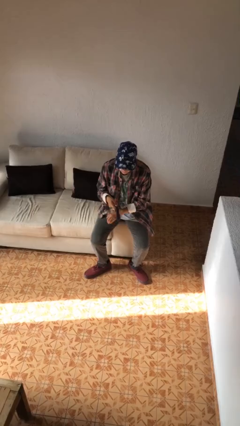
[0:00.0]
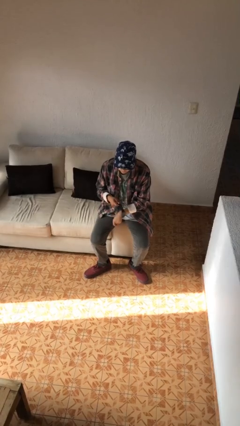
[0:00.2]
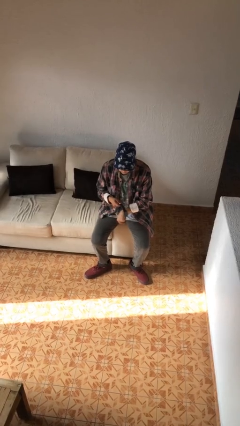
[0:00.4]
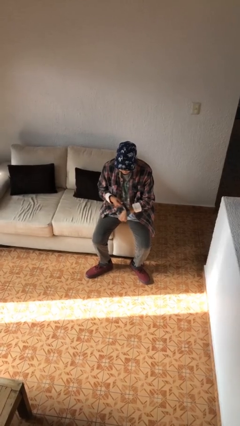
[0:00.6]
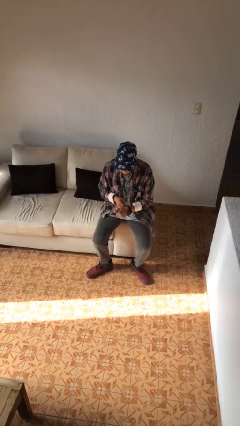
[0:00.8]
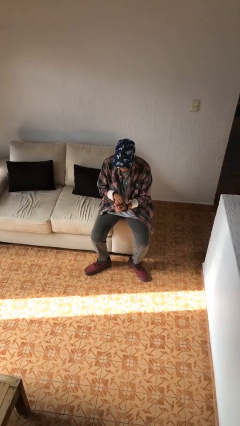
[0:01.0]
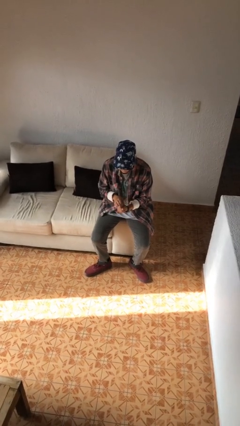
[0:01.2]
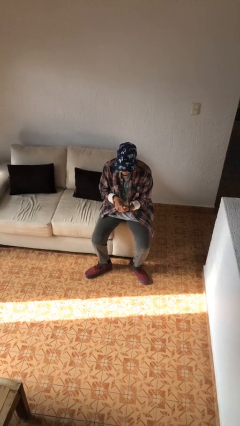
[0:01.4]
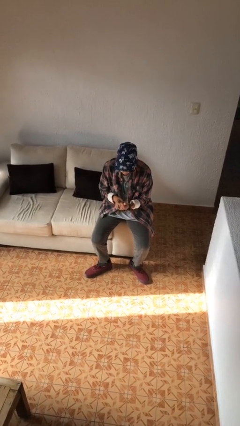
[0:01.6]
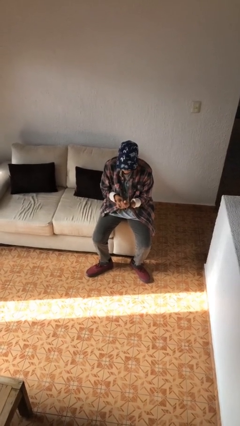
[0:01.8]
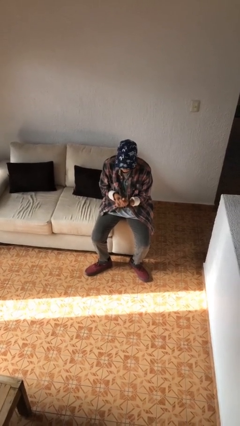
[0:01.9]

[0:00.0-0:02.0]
person puts on wristwatch

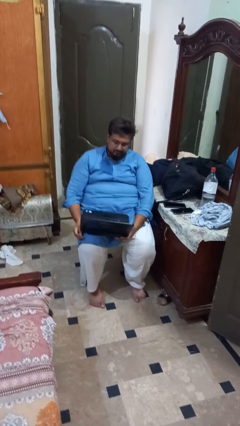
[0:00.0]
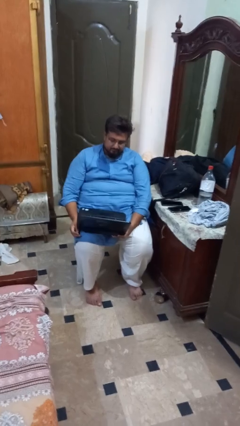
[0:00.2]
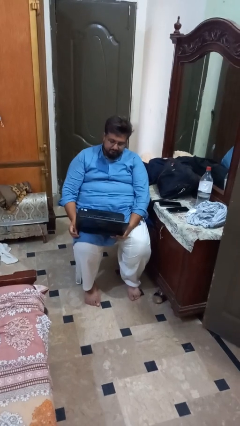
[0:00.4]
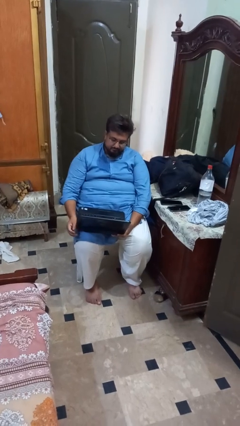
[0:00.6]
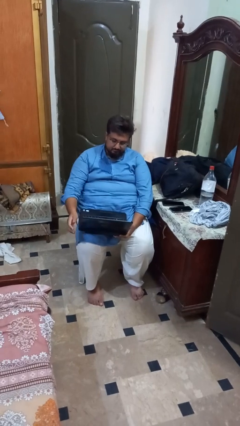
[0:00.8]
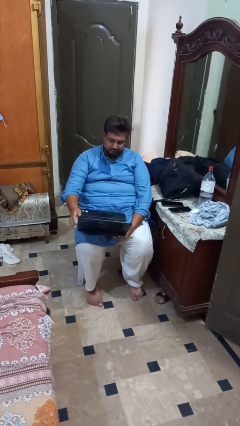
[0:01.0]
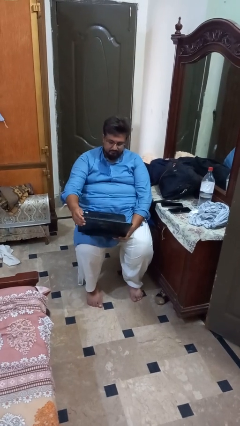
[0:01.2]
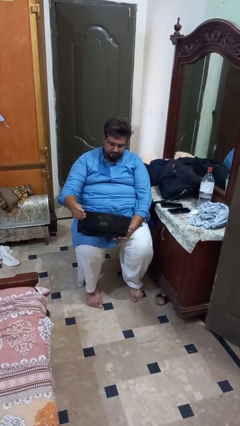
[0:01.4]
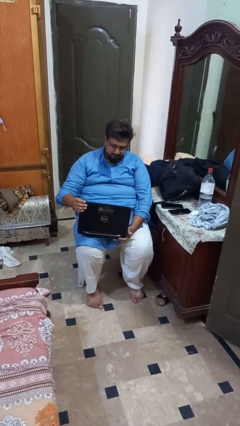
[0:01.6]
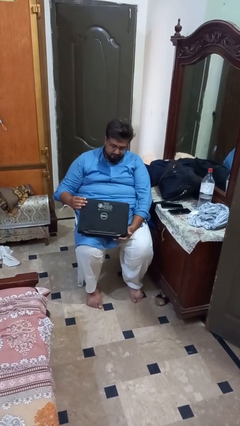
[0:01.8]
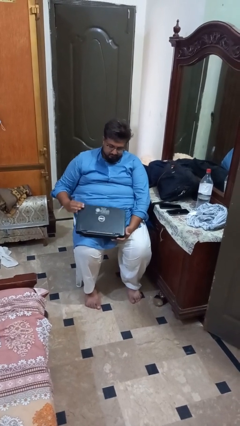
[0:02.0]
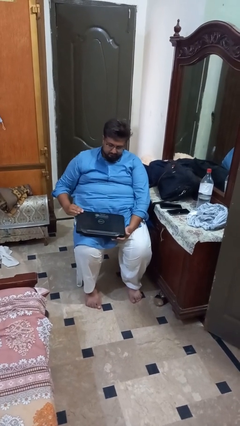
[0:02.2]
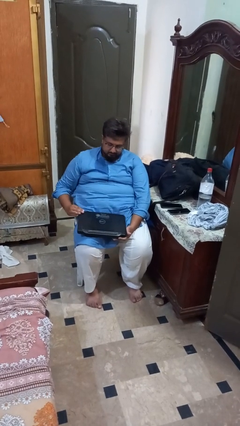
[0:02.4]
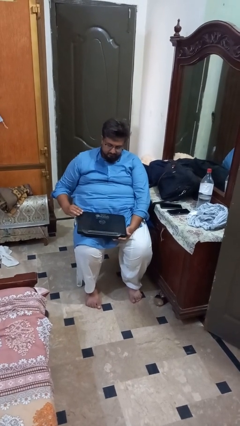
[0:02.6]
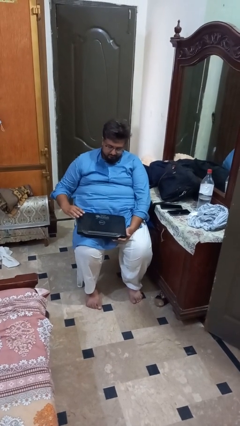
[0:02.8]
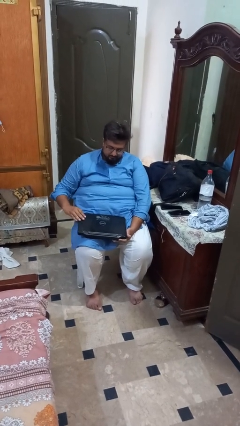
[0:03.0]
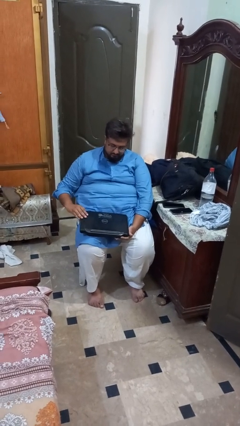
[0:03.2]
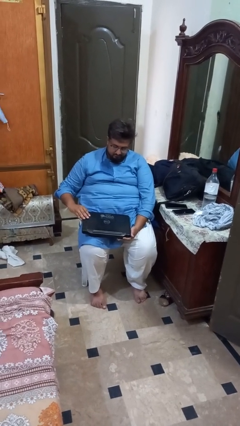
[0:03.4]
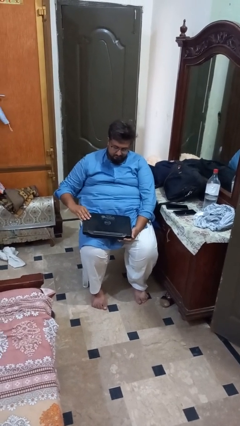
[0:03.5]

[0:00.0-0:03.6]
person closes laptop

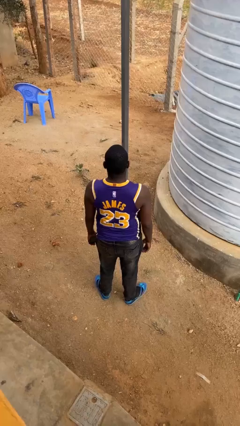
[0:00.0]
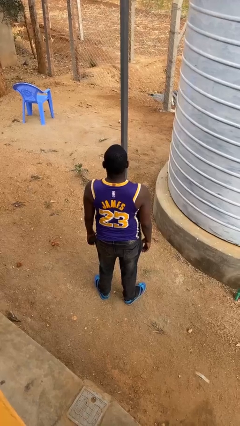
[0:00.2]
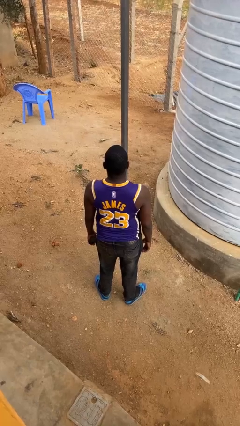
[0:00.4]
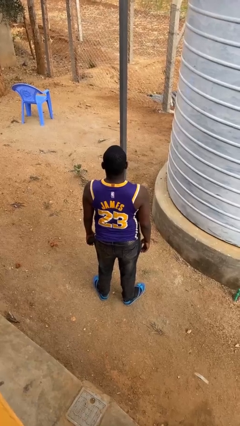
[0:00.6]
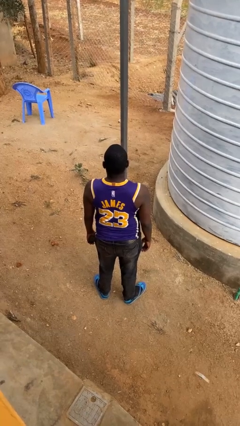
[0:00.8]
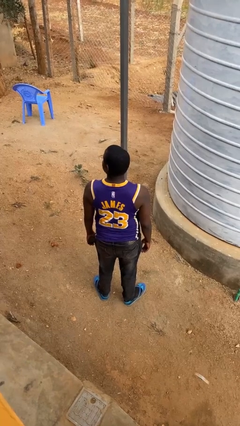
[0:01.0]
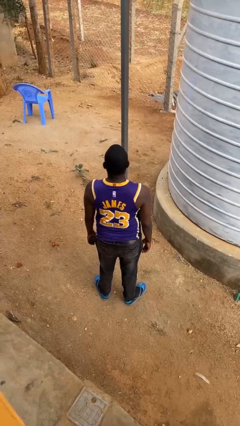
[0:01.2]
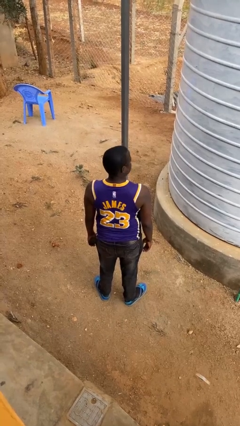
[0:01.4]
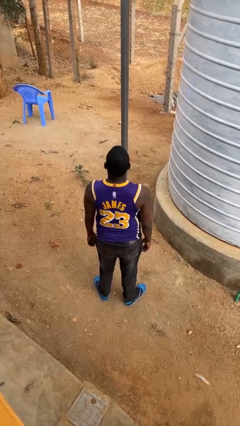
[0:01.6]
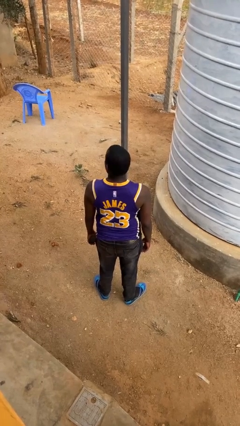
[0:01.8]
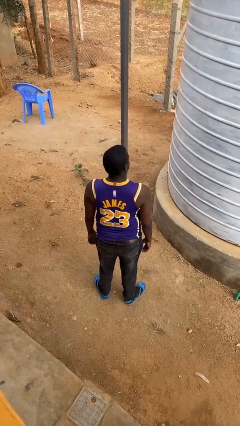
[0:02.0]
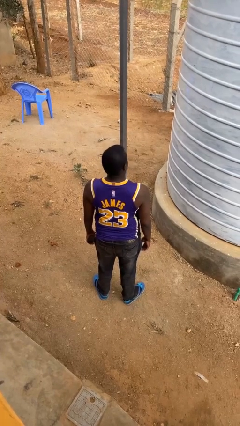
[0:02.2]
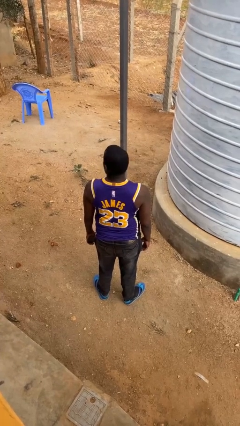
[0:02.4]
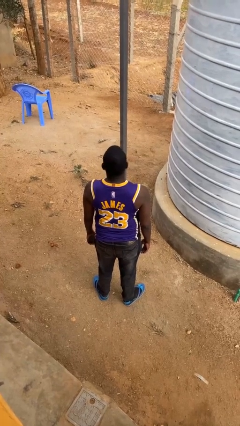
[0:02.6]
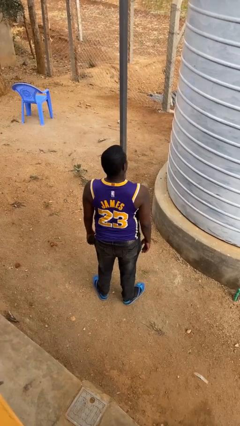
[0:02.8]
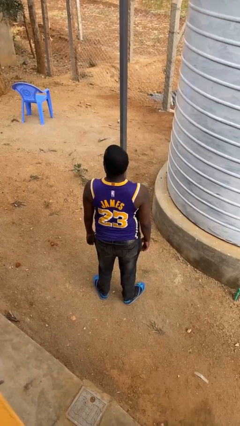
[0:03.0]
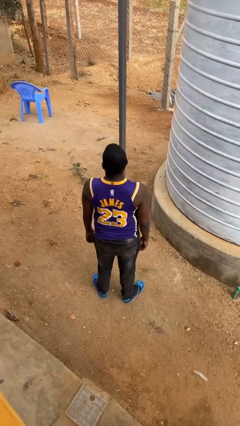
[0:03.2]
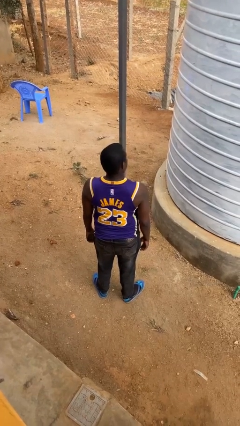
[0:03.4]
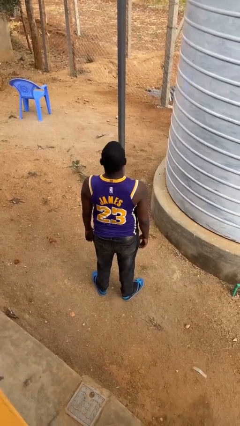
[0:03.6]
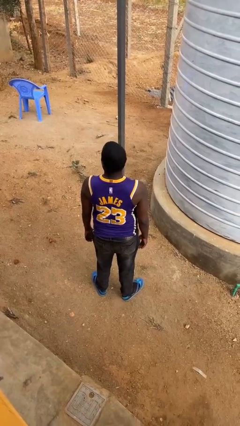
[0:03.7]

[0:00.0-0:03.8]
person shakes head

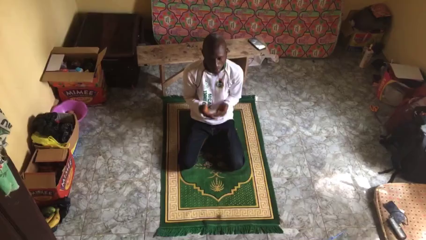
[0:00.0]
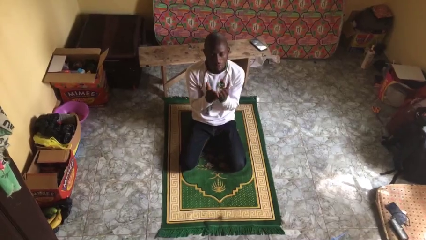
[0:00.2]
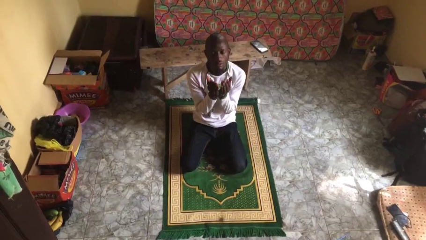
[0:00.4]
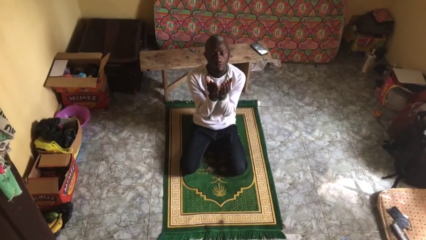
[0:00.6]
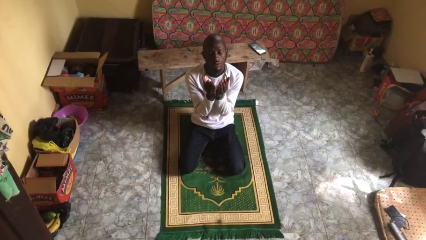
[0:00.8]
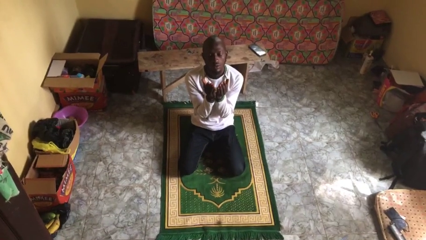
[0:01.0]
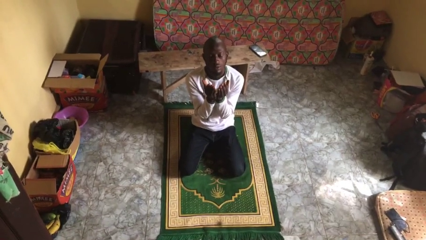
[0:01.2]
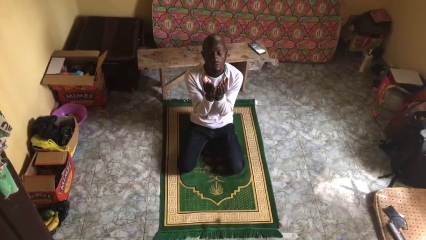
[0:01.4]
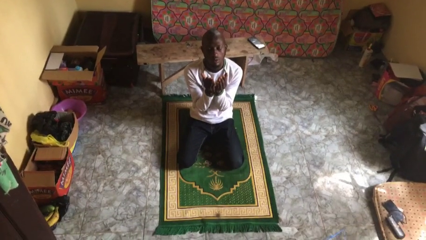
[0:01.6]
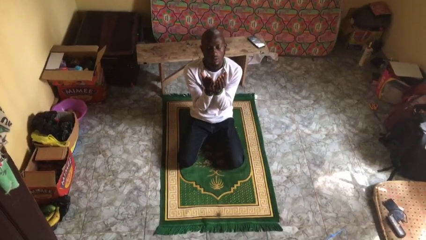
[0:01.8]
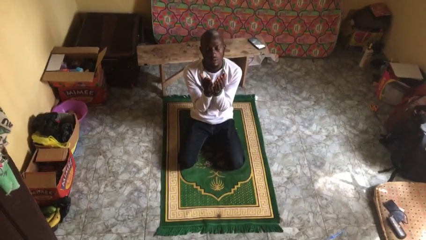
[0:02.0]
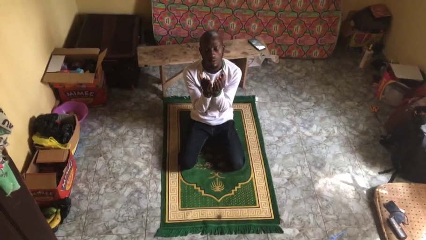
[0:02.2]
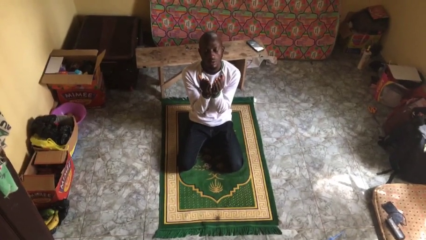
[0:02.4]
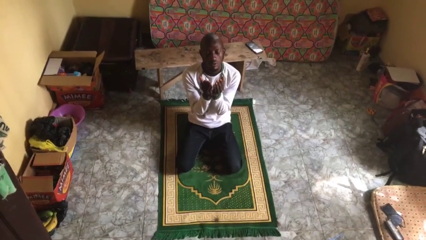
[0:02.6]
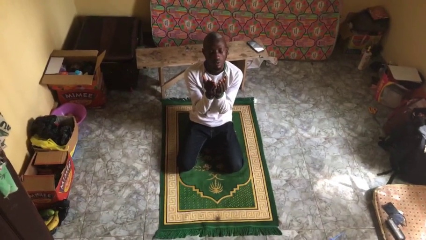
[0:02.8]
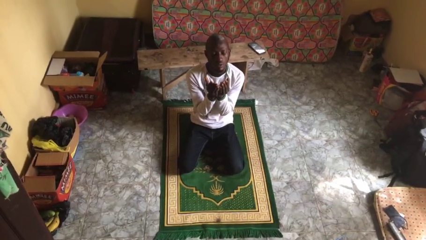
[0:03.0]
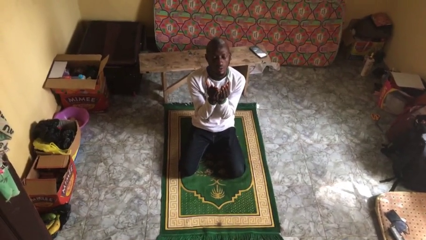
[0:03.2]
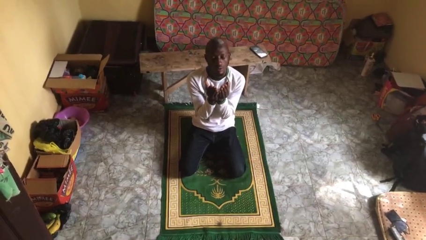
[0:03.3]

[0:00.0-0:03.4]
person prays

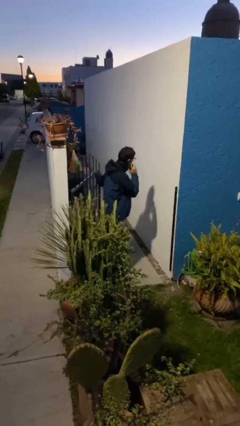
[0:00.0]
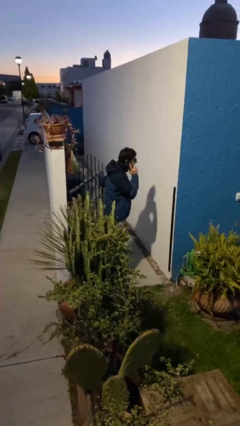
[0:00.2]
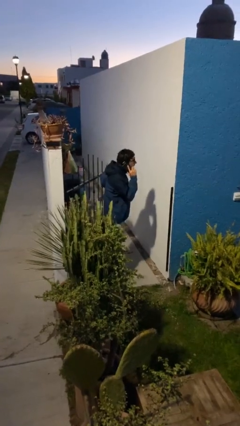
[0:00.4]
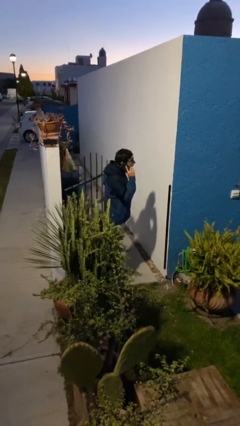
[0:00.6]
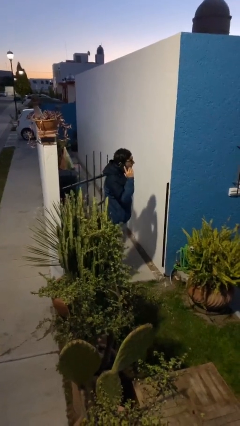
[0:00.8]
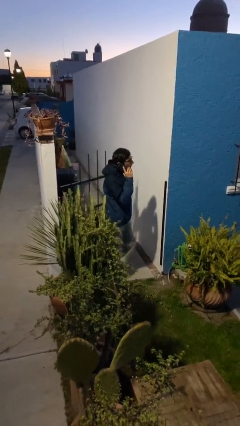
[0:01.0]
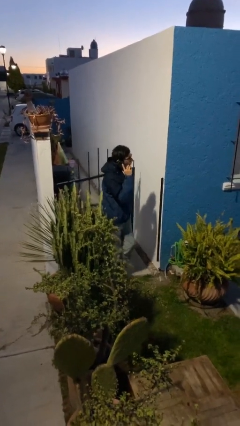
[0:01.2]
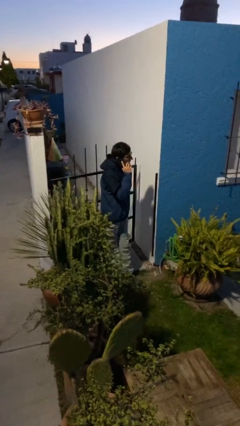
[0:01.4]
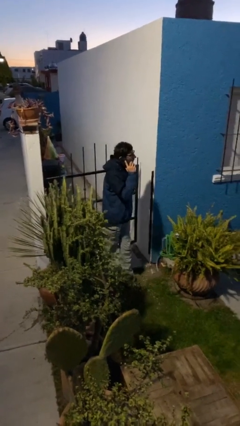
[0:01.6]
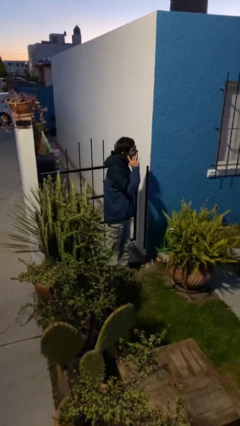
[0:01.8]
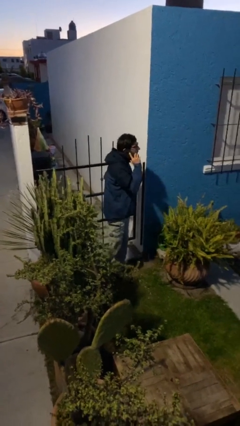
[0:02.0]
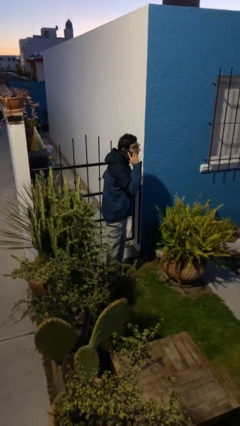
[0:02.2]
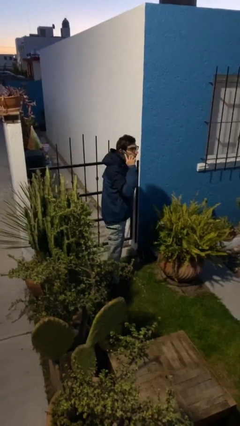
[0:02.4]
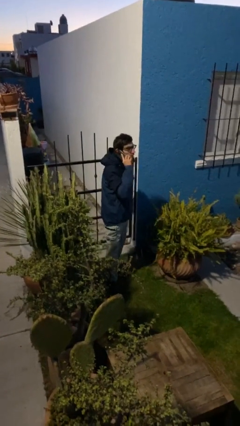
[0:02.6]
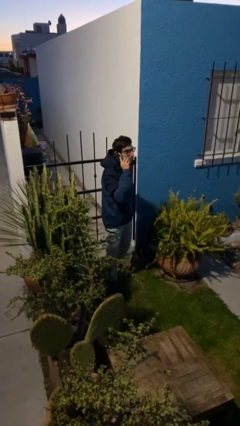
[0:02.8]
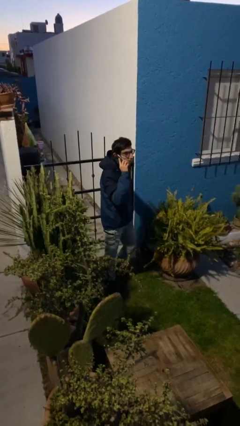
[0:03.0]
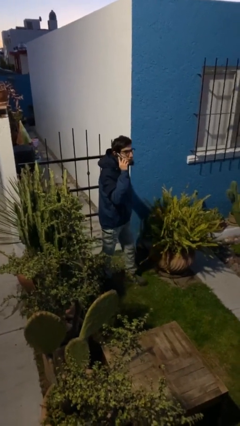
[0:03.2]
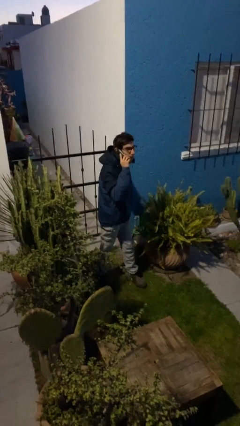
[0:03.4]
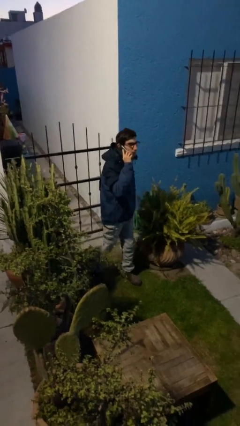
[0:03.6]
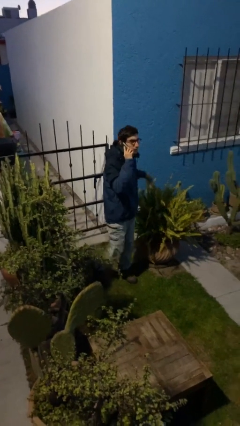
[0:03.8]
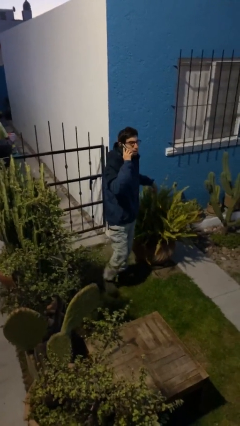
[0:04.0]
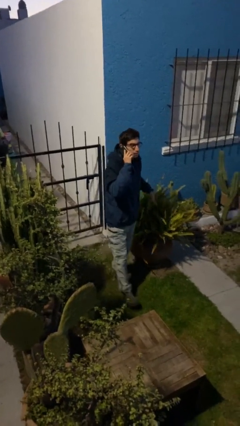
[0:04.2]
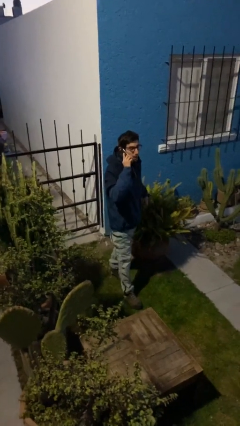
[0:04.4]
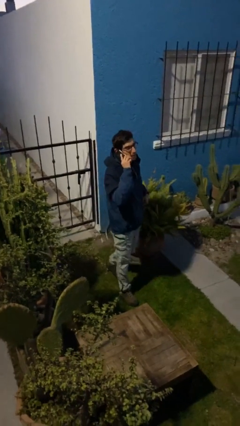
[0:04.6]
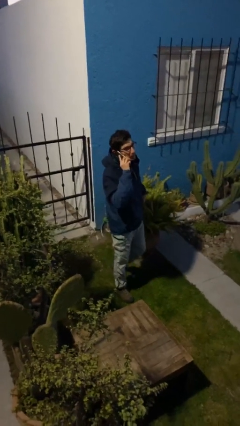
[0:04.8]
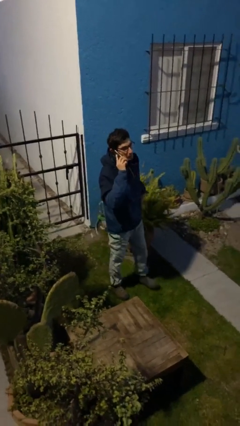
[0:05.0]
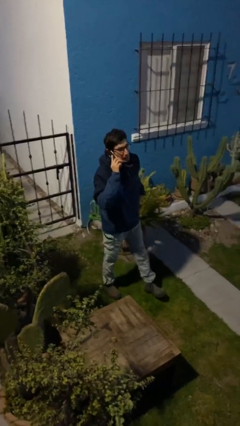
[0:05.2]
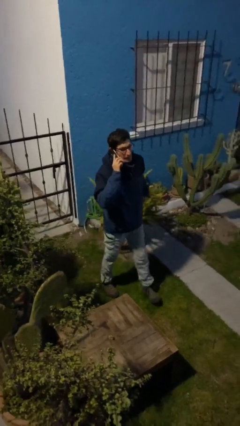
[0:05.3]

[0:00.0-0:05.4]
person closes facility door
